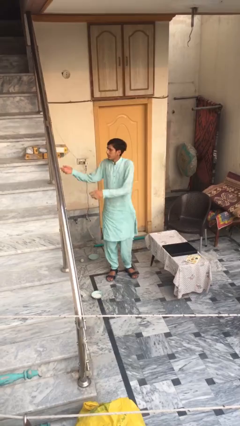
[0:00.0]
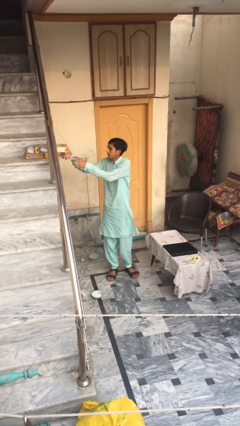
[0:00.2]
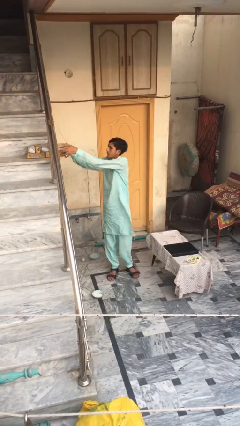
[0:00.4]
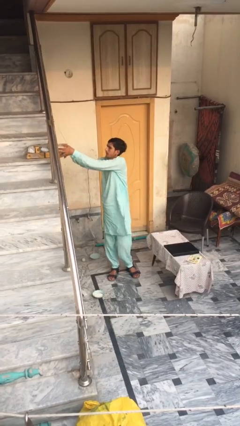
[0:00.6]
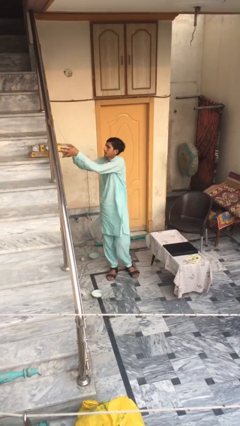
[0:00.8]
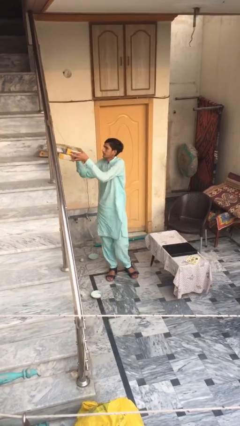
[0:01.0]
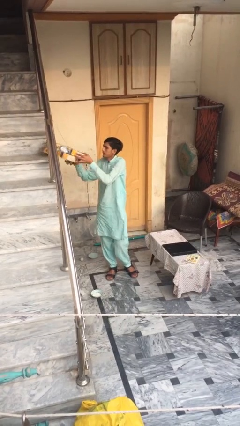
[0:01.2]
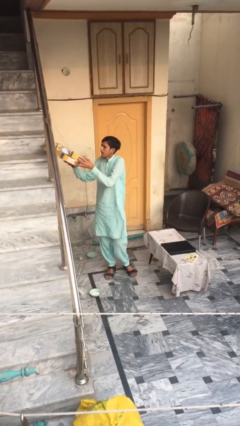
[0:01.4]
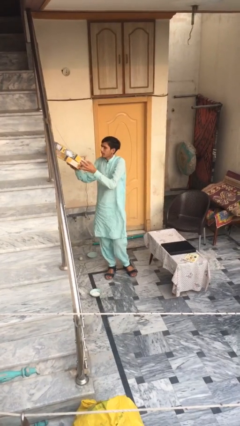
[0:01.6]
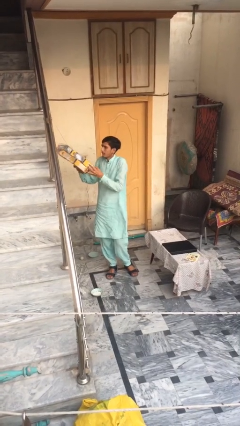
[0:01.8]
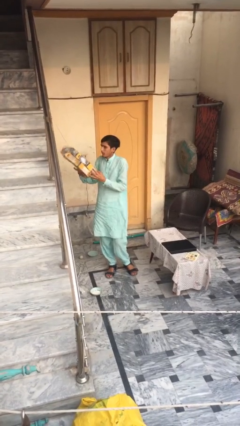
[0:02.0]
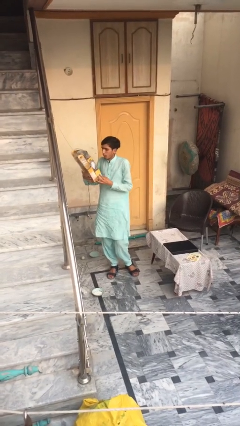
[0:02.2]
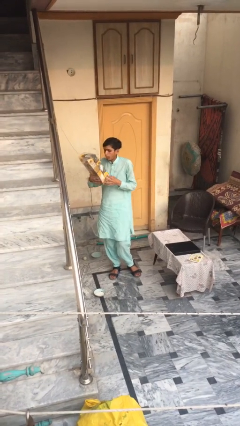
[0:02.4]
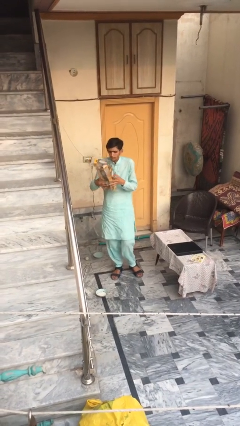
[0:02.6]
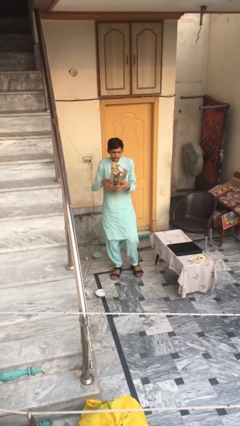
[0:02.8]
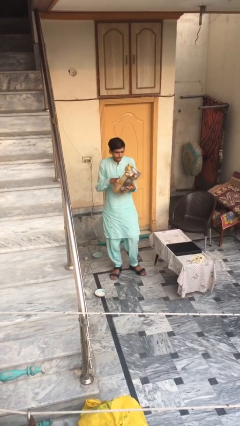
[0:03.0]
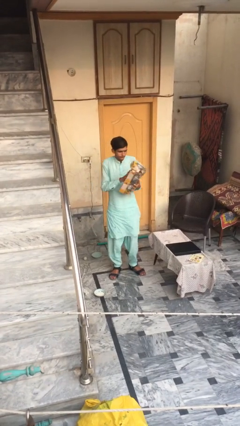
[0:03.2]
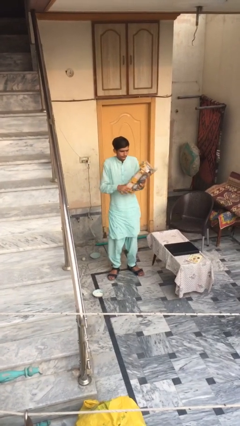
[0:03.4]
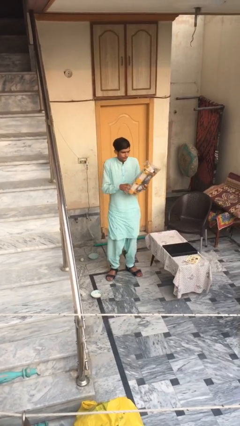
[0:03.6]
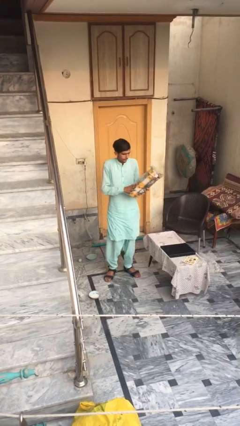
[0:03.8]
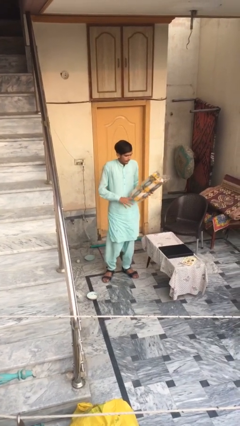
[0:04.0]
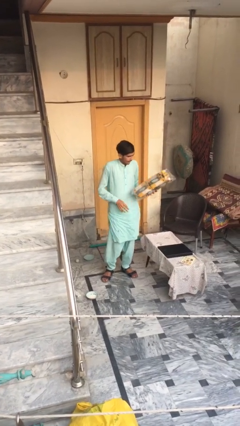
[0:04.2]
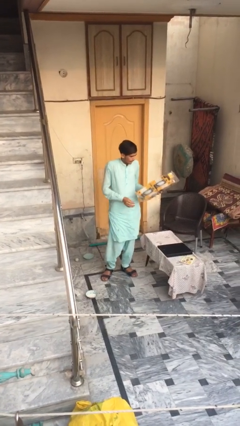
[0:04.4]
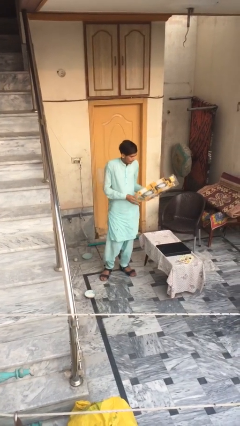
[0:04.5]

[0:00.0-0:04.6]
person picks up object from shelf

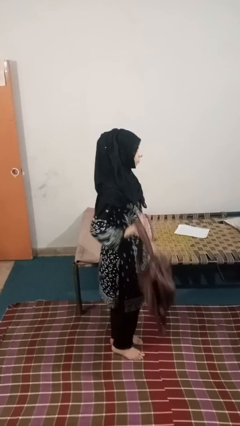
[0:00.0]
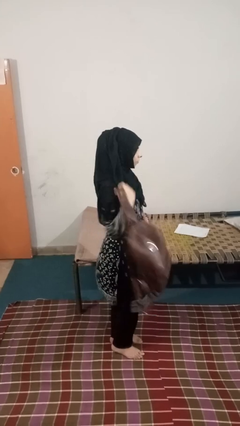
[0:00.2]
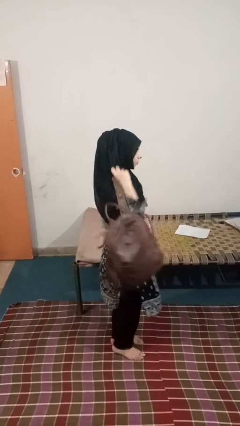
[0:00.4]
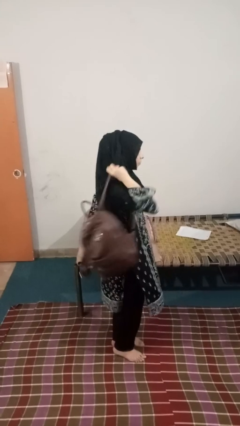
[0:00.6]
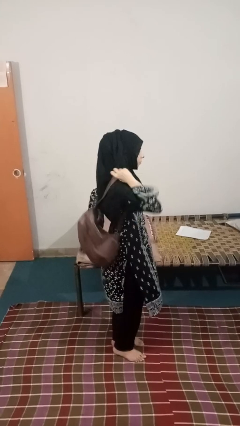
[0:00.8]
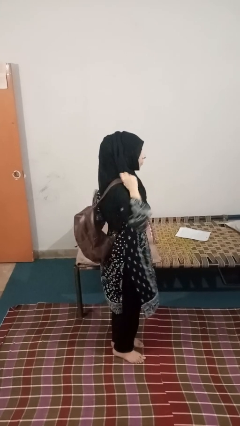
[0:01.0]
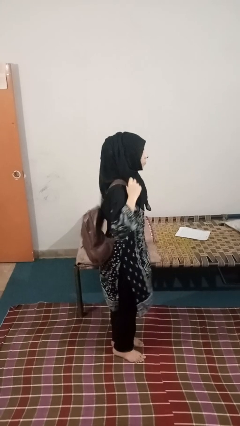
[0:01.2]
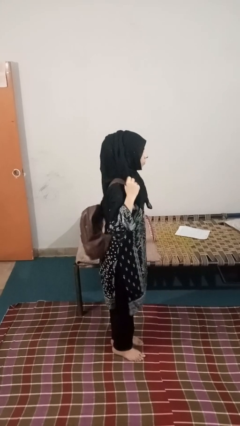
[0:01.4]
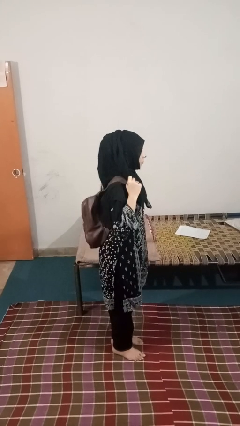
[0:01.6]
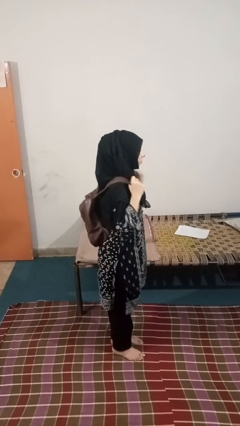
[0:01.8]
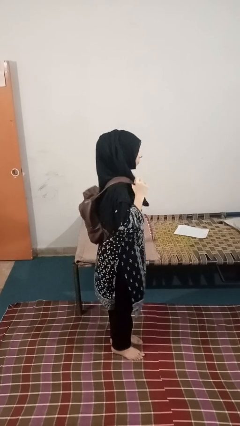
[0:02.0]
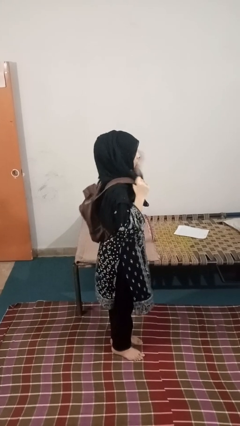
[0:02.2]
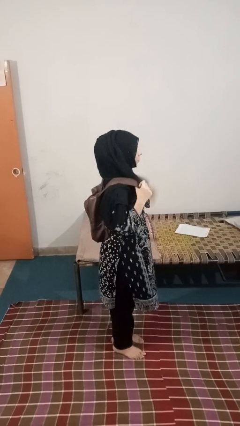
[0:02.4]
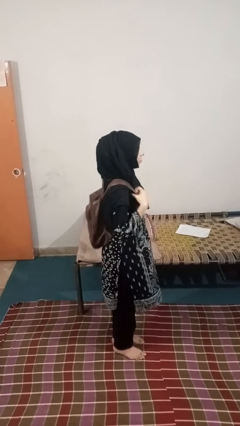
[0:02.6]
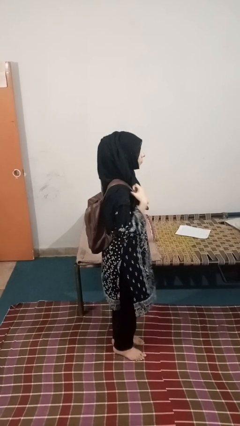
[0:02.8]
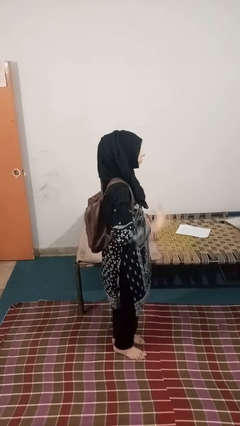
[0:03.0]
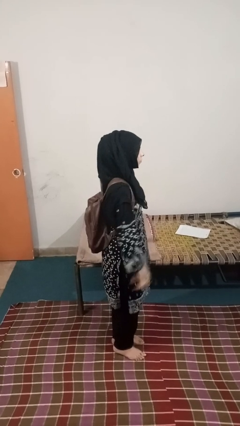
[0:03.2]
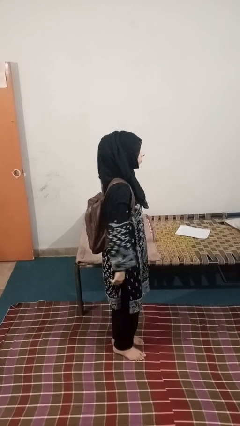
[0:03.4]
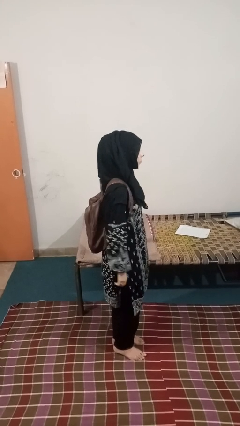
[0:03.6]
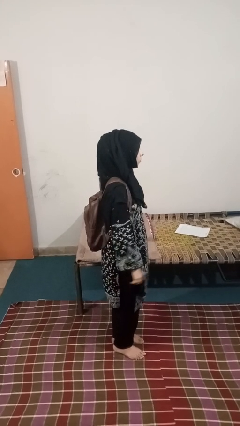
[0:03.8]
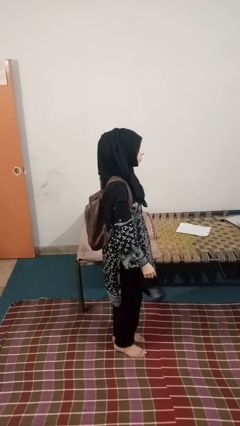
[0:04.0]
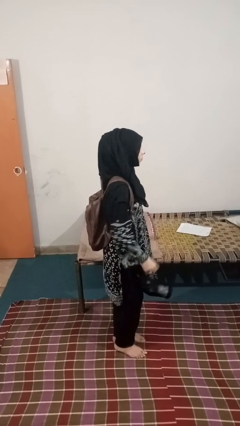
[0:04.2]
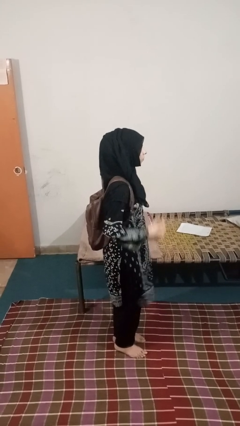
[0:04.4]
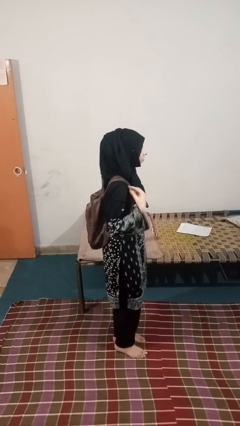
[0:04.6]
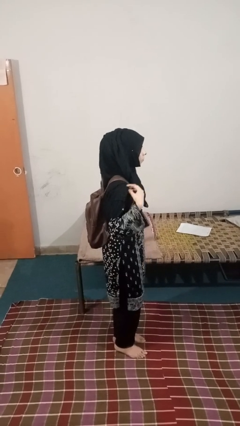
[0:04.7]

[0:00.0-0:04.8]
person puts on backpack

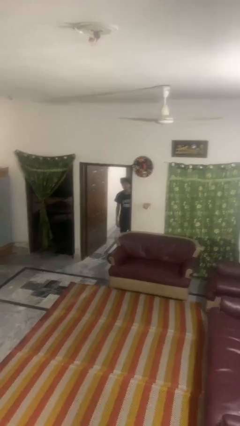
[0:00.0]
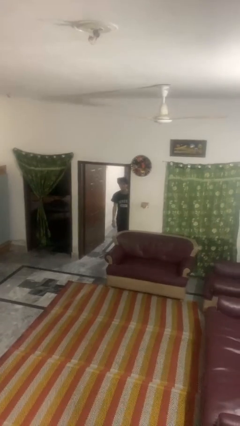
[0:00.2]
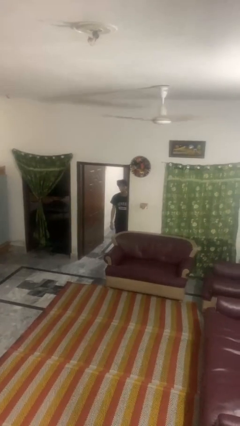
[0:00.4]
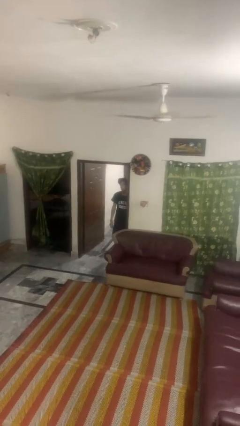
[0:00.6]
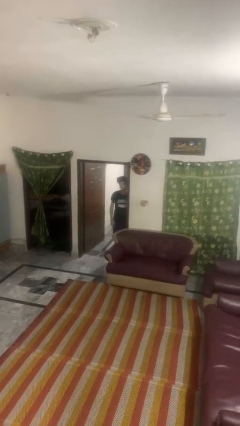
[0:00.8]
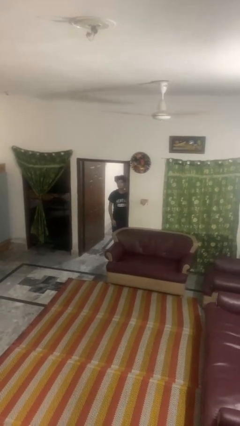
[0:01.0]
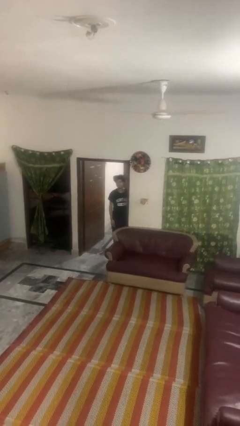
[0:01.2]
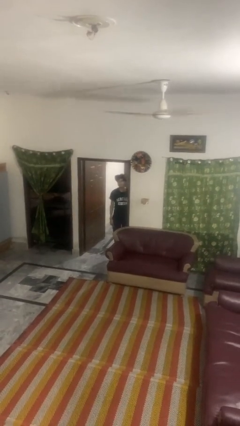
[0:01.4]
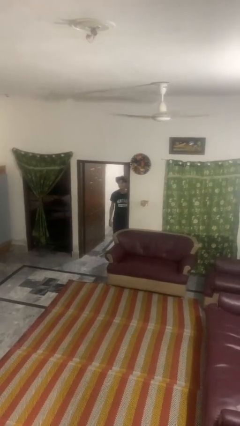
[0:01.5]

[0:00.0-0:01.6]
person bumps into wall

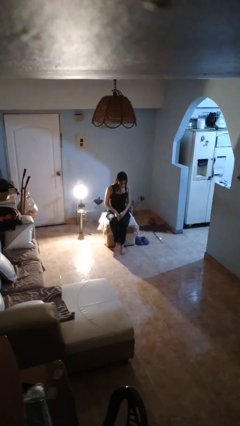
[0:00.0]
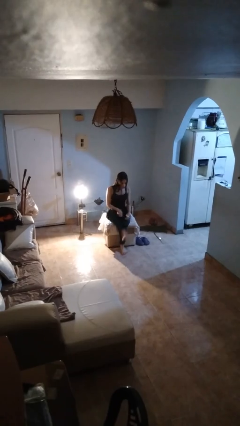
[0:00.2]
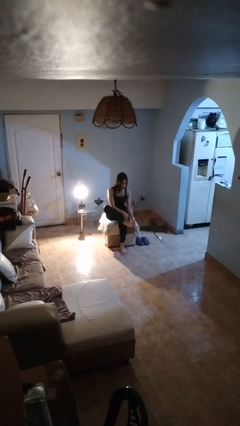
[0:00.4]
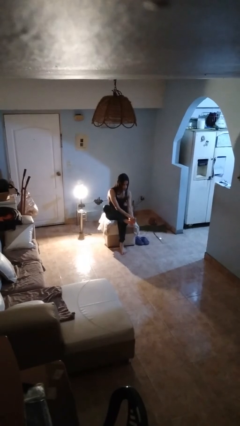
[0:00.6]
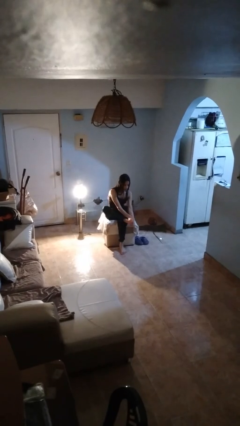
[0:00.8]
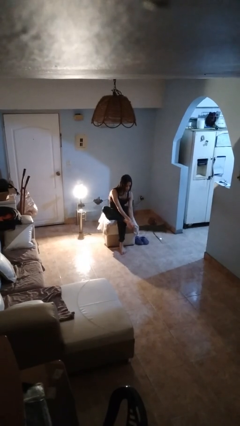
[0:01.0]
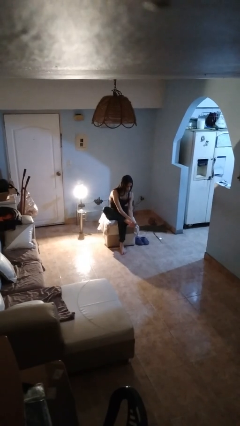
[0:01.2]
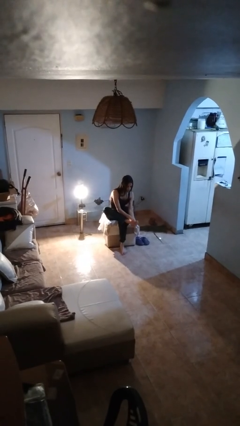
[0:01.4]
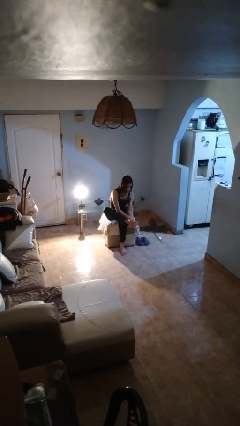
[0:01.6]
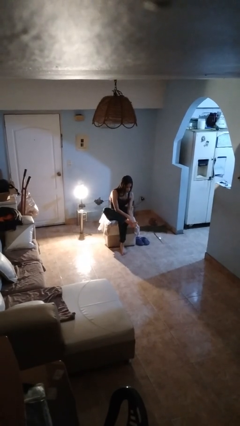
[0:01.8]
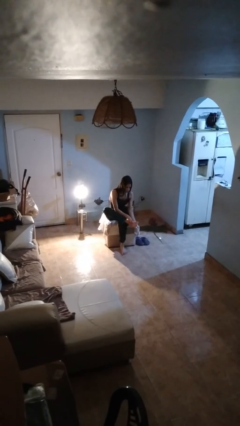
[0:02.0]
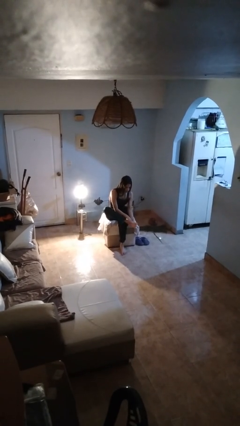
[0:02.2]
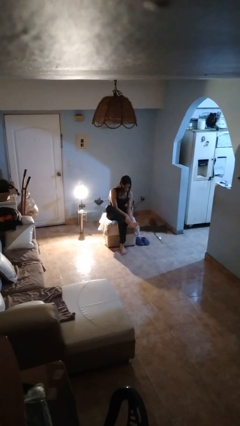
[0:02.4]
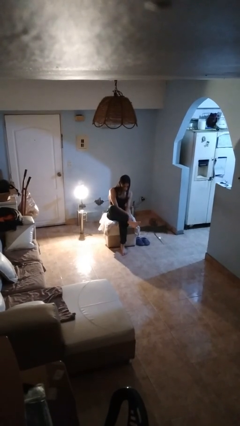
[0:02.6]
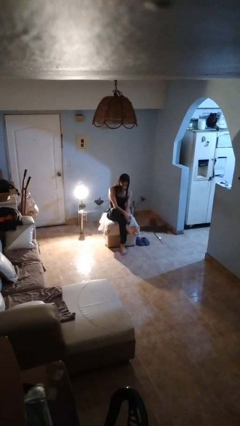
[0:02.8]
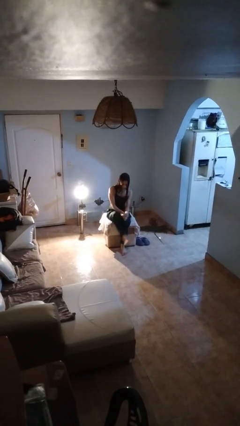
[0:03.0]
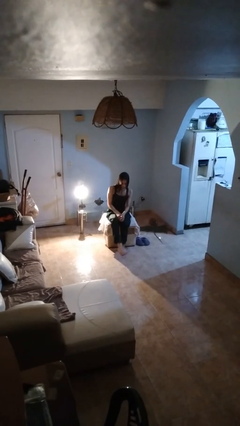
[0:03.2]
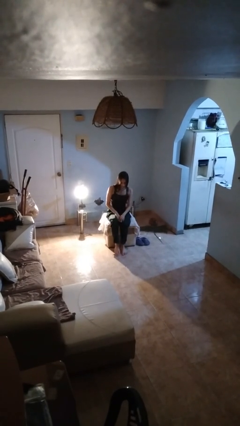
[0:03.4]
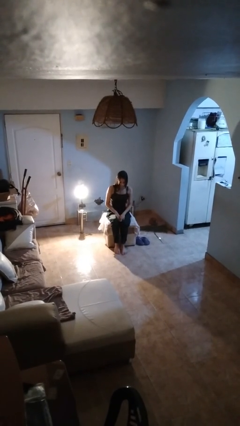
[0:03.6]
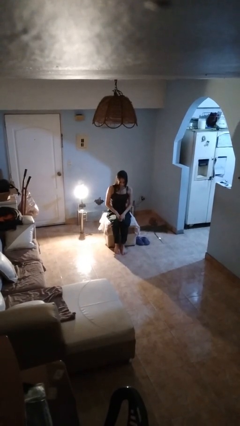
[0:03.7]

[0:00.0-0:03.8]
person rubs foot

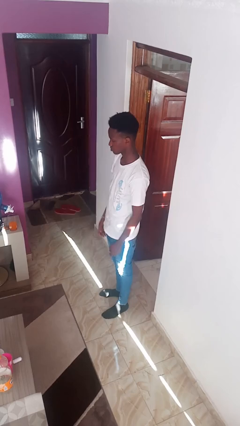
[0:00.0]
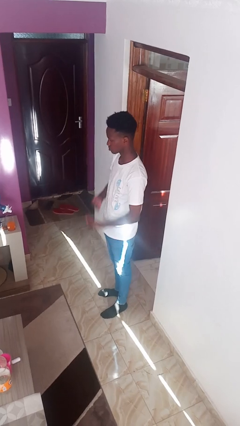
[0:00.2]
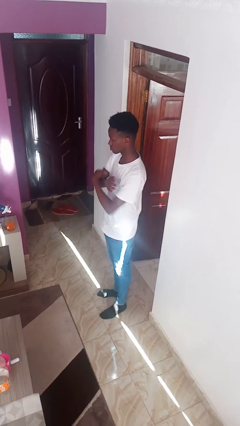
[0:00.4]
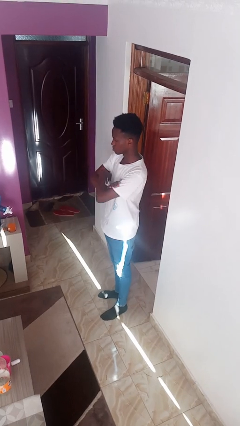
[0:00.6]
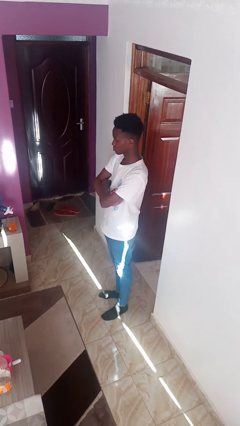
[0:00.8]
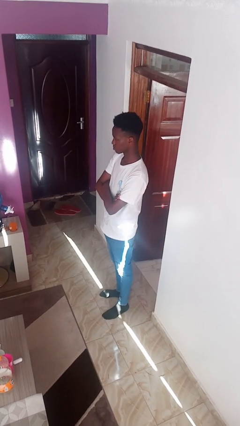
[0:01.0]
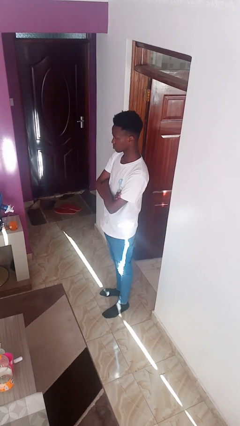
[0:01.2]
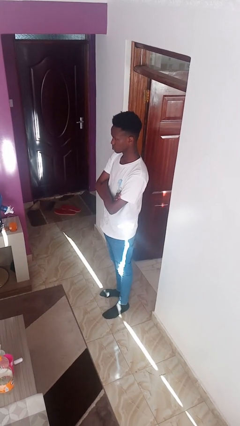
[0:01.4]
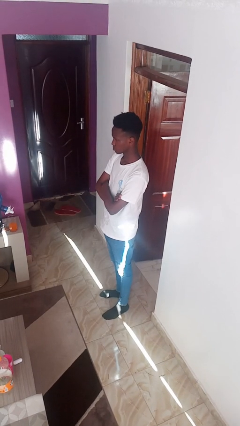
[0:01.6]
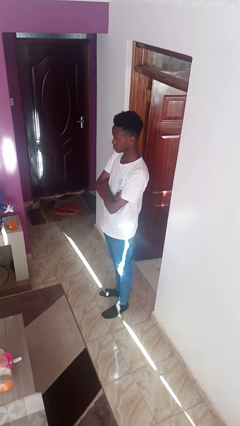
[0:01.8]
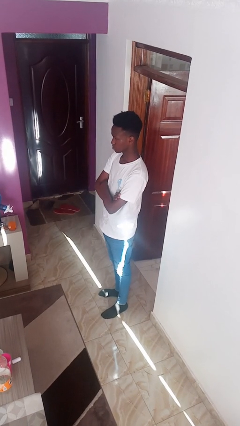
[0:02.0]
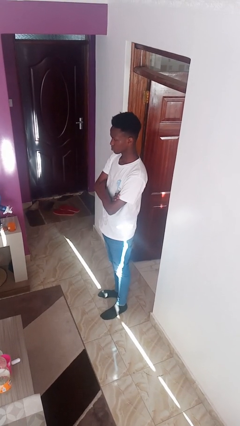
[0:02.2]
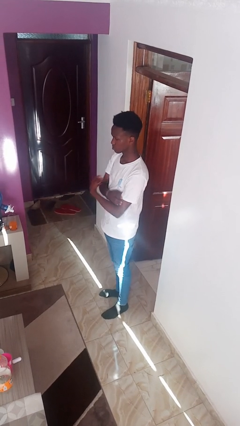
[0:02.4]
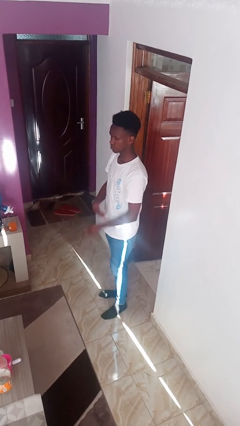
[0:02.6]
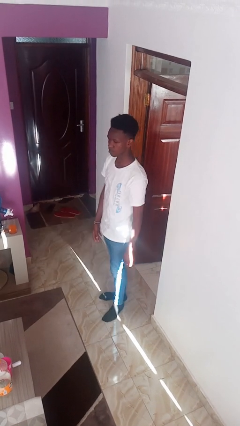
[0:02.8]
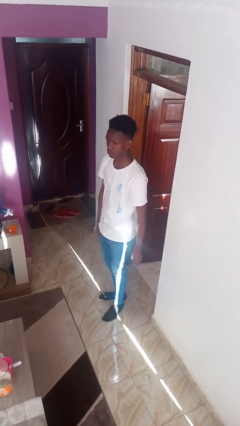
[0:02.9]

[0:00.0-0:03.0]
person crosses arms
